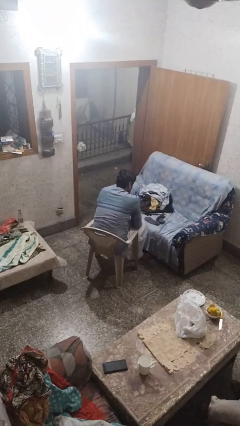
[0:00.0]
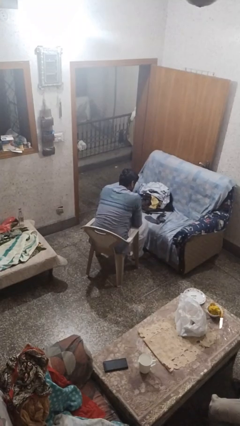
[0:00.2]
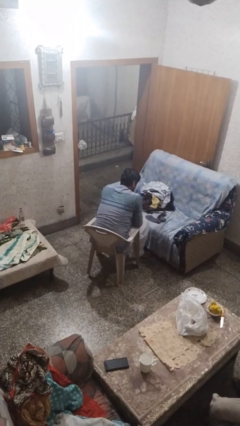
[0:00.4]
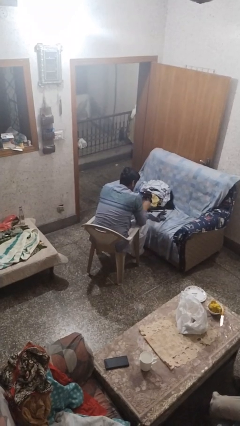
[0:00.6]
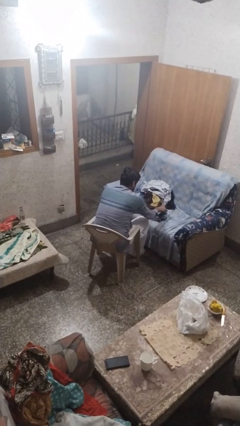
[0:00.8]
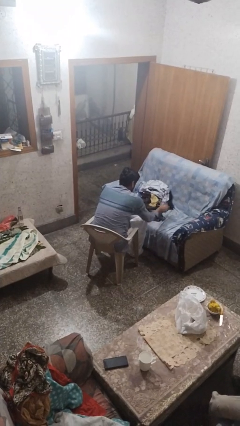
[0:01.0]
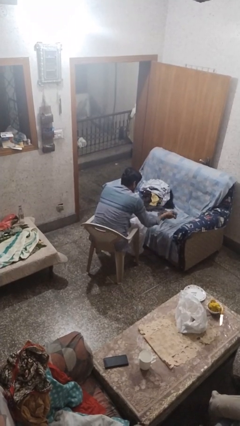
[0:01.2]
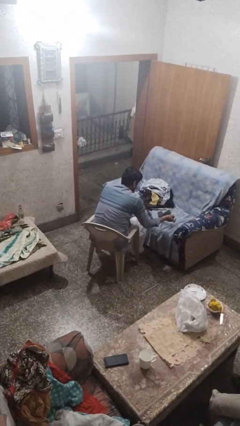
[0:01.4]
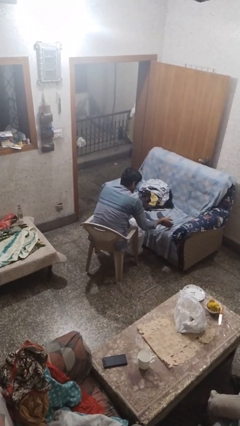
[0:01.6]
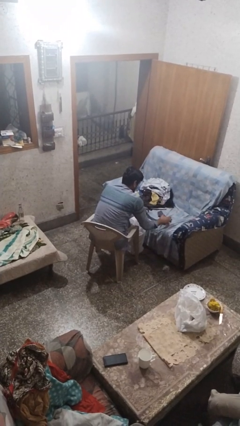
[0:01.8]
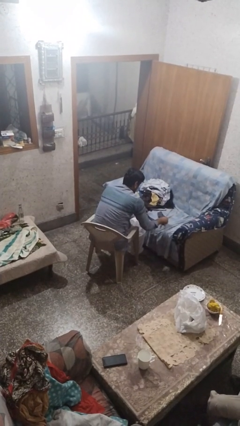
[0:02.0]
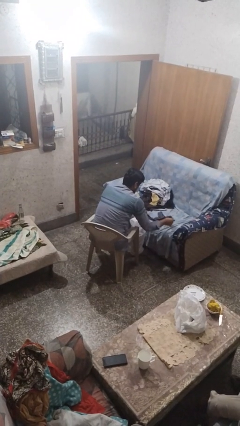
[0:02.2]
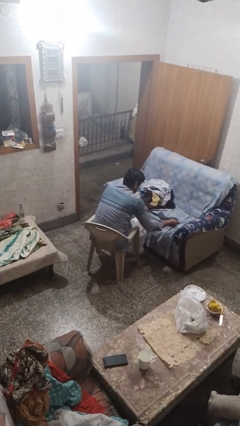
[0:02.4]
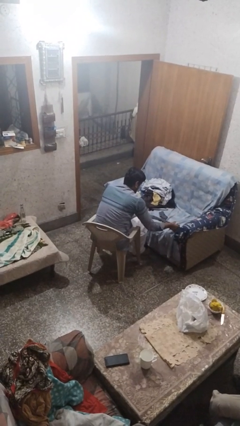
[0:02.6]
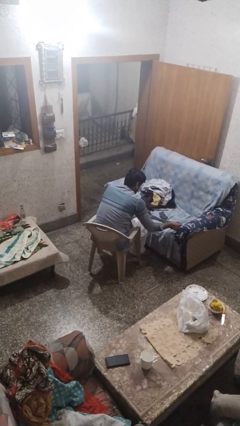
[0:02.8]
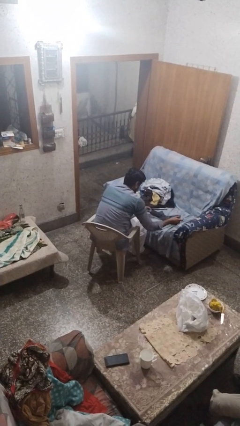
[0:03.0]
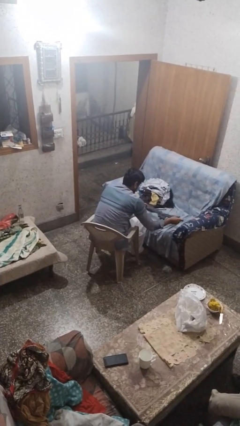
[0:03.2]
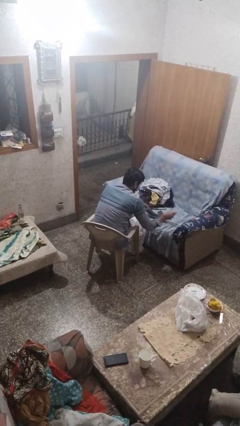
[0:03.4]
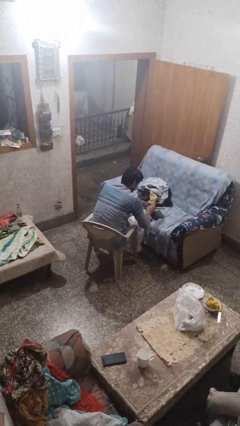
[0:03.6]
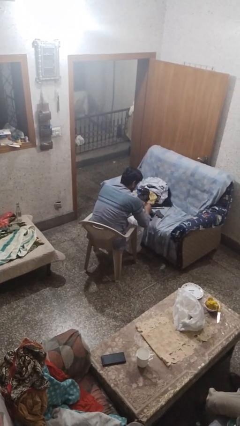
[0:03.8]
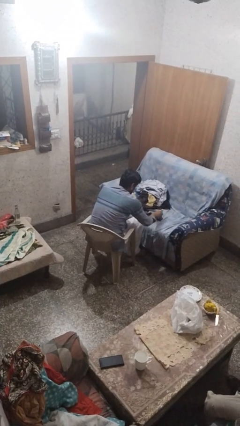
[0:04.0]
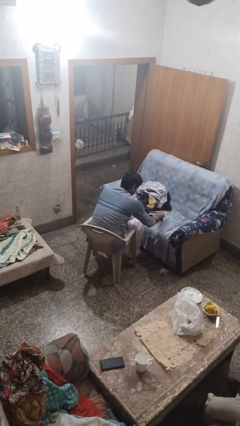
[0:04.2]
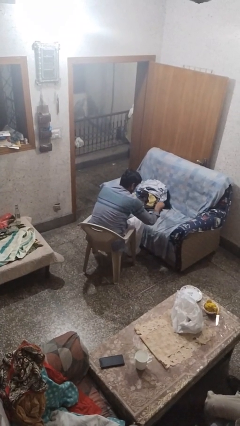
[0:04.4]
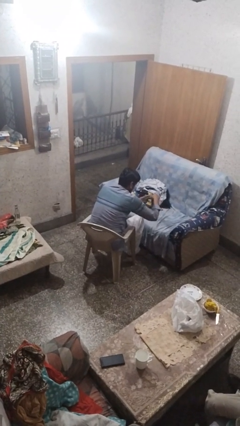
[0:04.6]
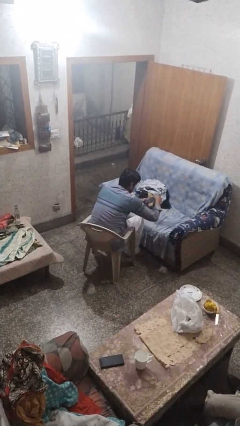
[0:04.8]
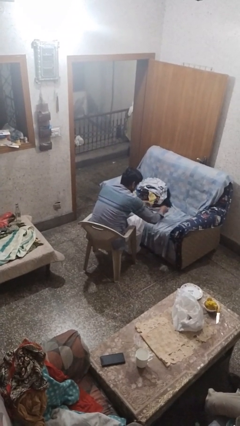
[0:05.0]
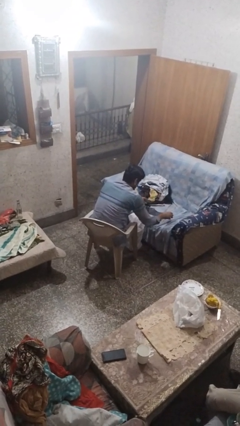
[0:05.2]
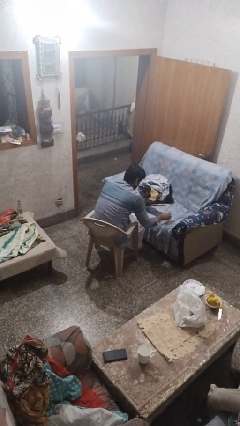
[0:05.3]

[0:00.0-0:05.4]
person folds socks

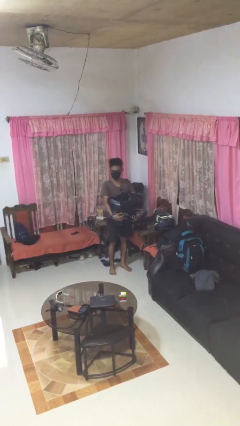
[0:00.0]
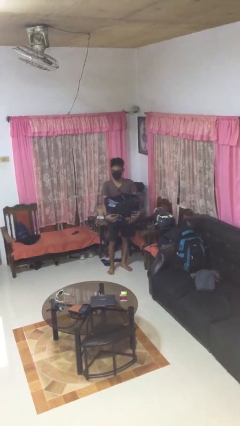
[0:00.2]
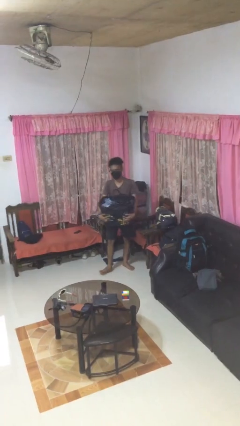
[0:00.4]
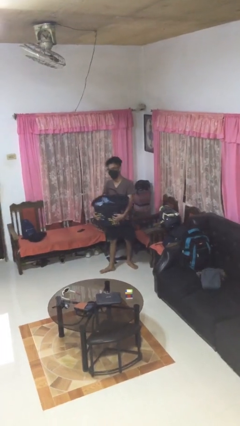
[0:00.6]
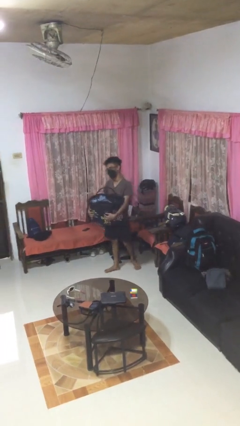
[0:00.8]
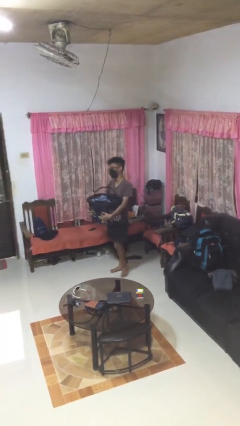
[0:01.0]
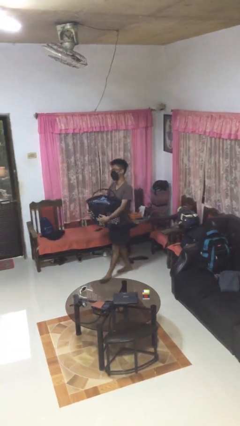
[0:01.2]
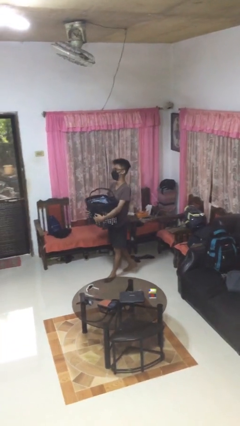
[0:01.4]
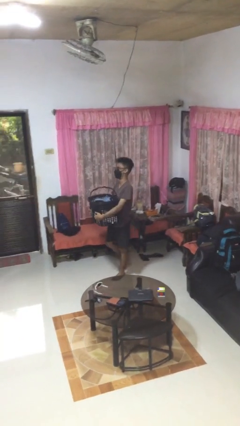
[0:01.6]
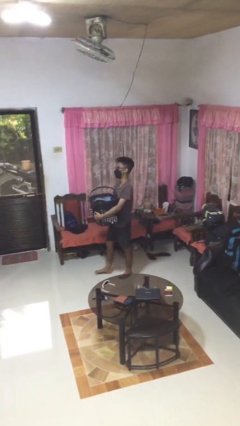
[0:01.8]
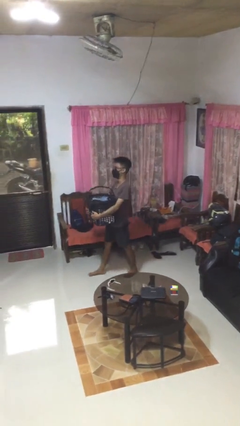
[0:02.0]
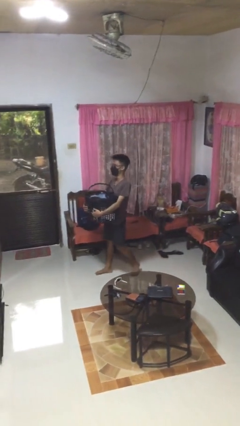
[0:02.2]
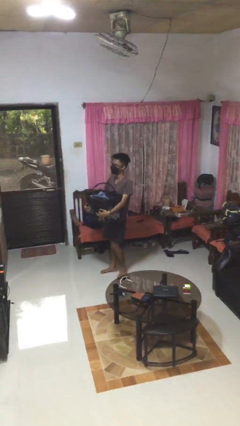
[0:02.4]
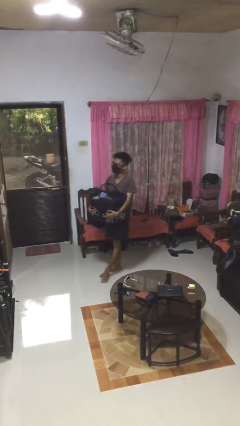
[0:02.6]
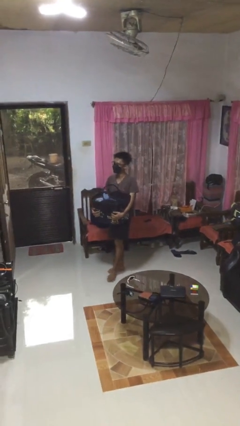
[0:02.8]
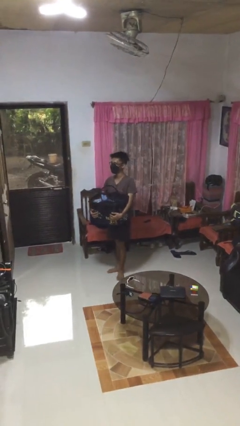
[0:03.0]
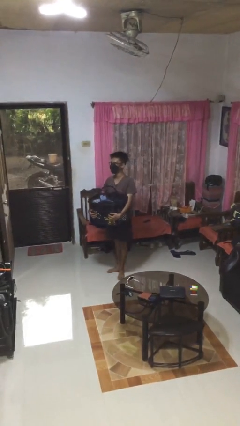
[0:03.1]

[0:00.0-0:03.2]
person carries laundry basket

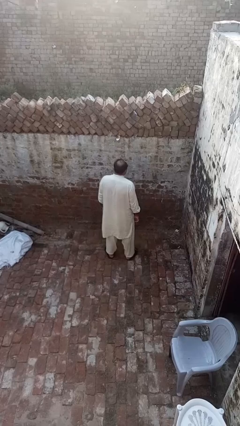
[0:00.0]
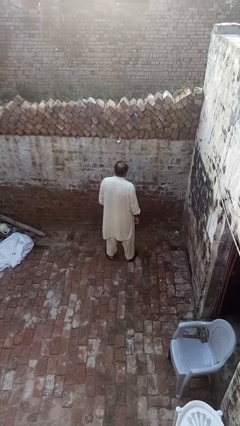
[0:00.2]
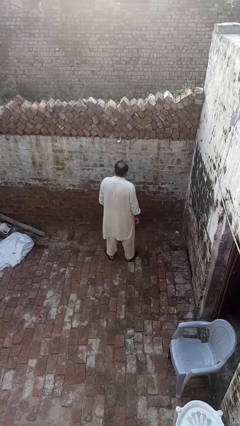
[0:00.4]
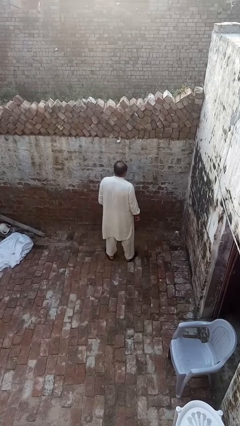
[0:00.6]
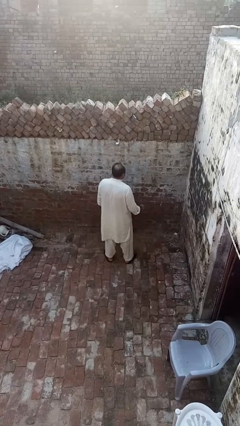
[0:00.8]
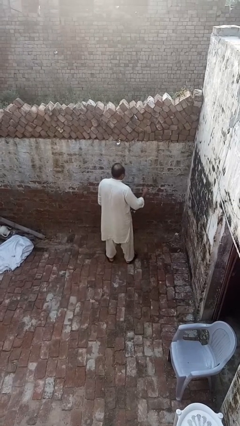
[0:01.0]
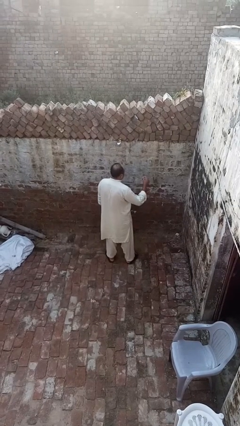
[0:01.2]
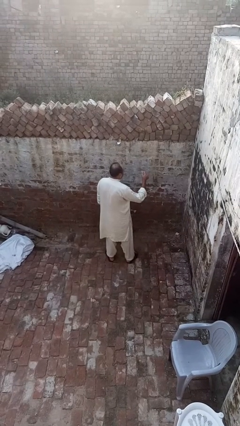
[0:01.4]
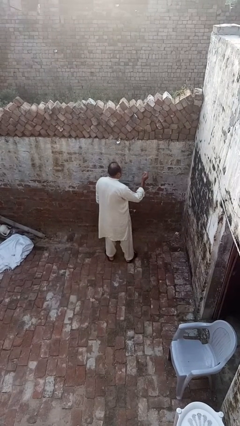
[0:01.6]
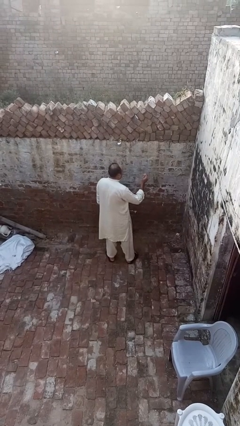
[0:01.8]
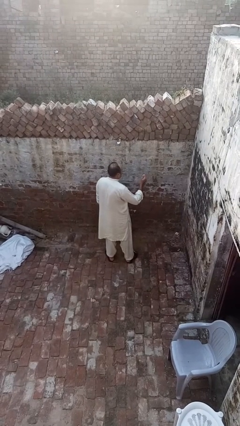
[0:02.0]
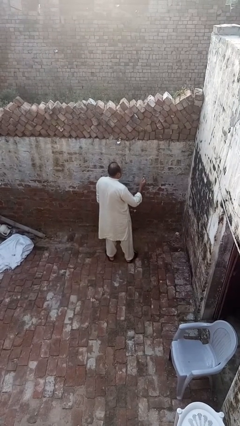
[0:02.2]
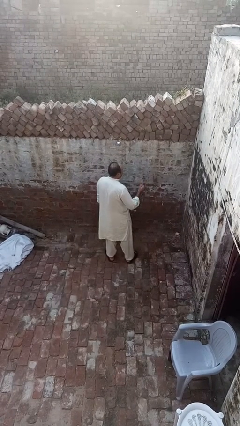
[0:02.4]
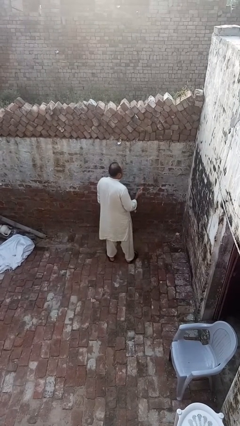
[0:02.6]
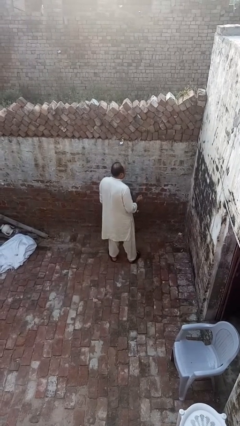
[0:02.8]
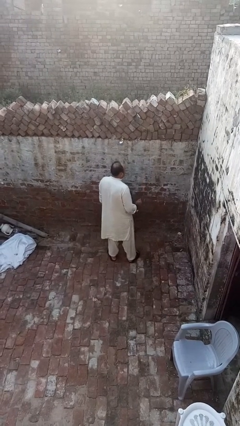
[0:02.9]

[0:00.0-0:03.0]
person snaps fingers

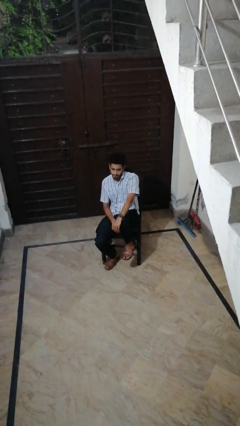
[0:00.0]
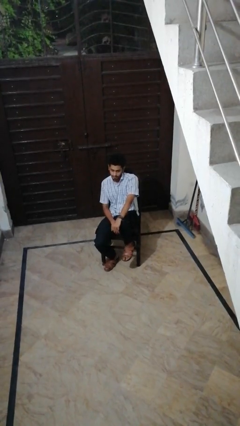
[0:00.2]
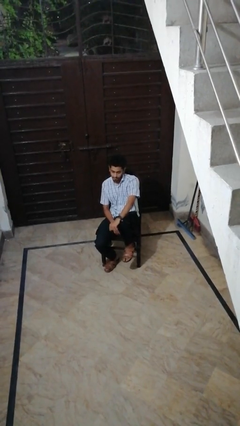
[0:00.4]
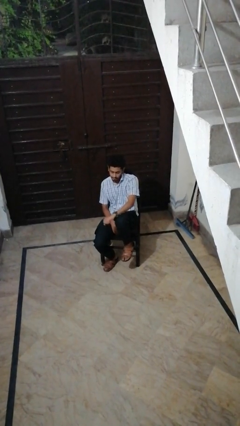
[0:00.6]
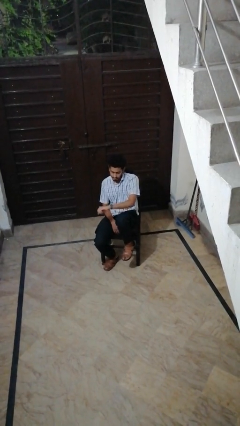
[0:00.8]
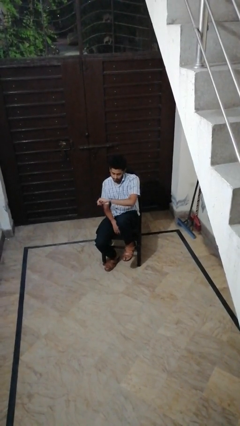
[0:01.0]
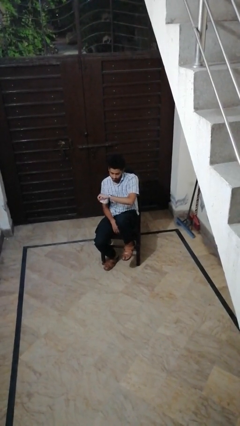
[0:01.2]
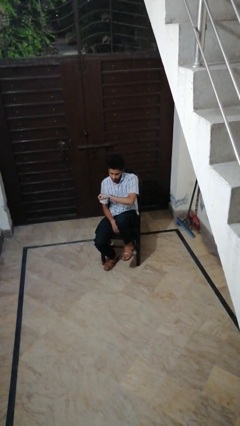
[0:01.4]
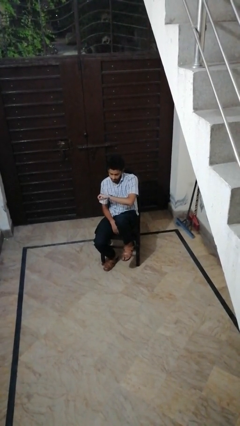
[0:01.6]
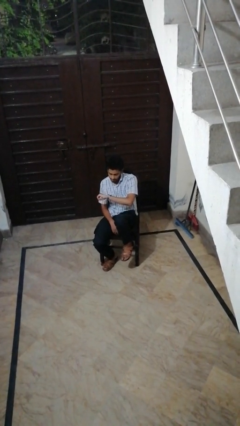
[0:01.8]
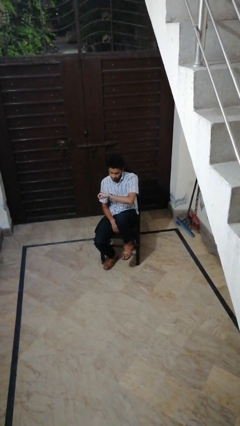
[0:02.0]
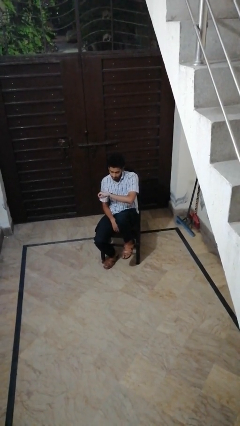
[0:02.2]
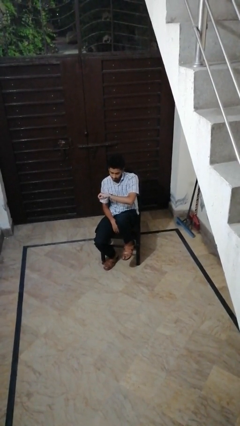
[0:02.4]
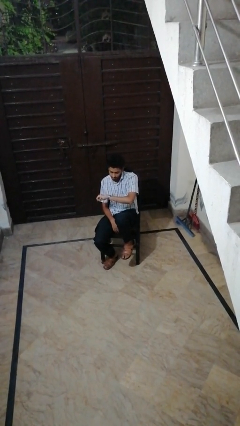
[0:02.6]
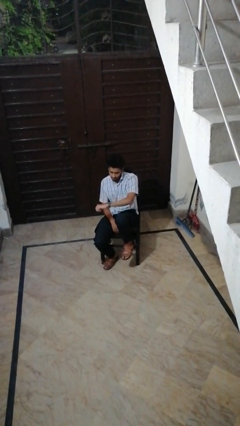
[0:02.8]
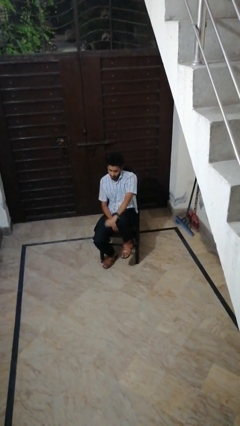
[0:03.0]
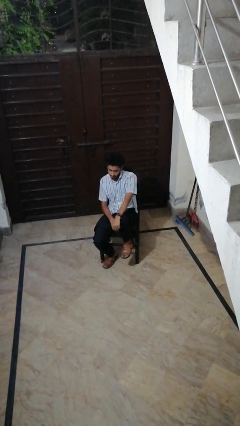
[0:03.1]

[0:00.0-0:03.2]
person looks at wristwatch

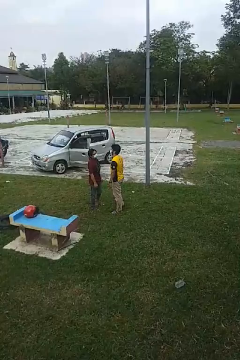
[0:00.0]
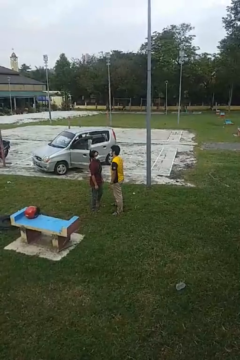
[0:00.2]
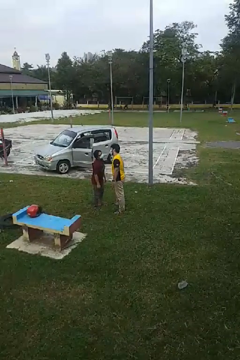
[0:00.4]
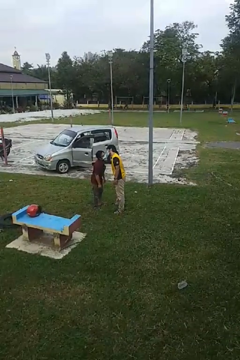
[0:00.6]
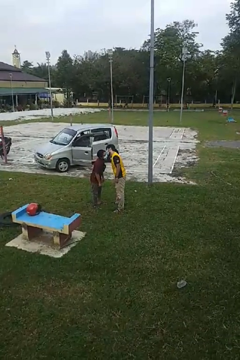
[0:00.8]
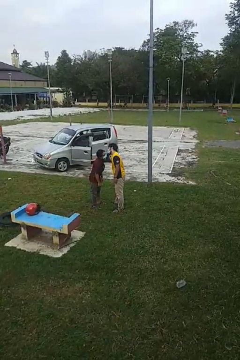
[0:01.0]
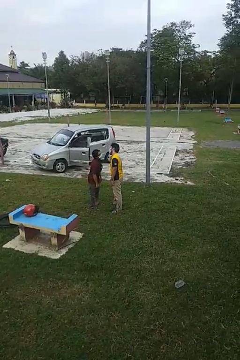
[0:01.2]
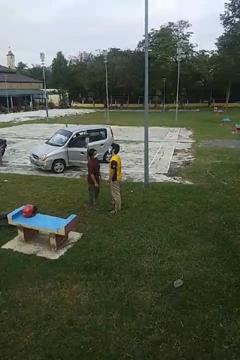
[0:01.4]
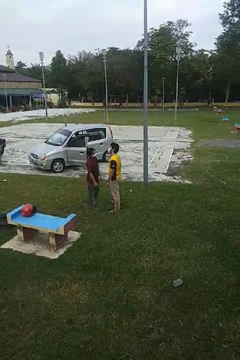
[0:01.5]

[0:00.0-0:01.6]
person kisses cheek of person

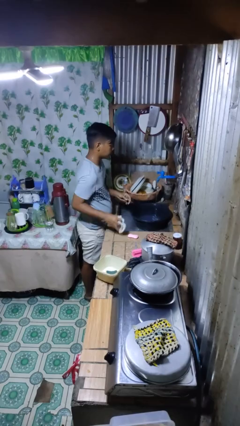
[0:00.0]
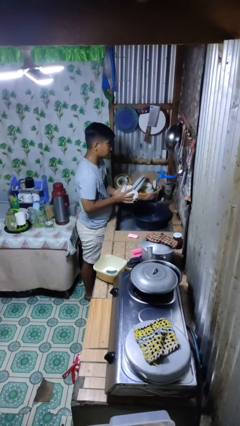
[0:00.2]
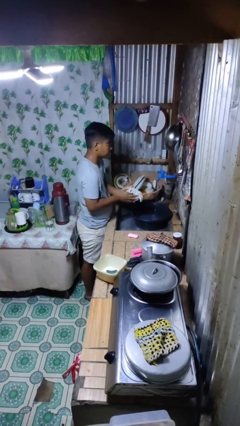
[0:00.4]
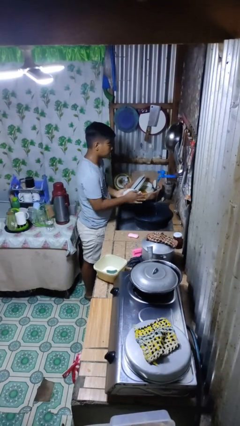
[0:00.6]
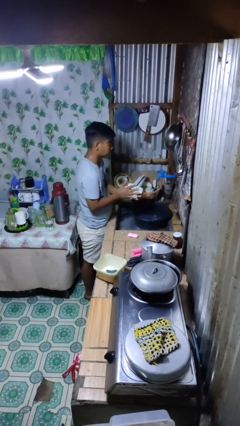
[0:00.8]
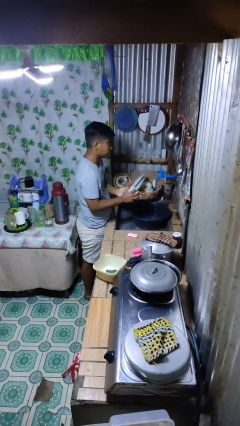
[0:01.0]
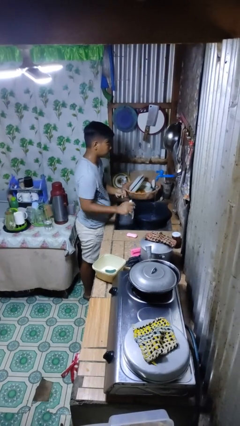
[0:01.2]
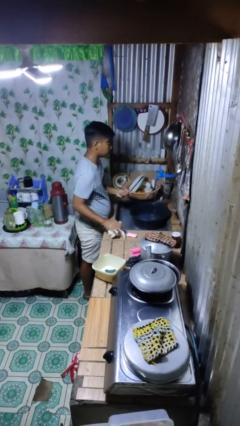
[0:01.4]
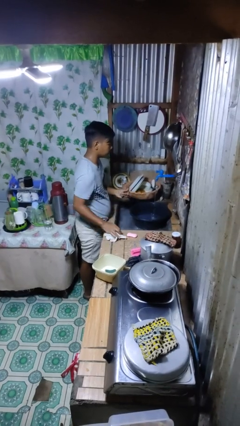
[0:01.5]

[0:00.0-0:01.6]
person dries hands with towel
